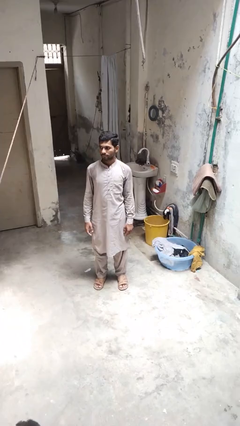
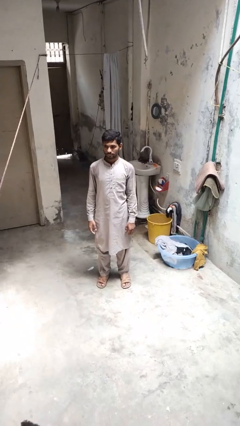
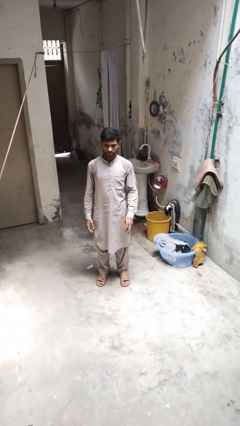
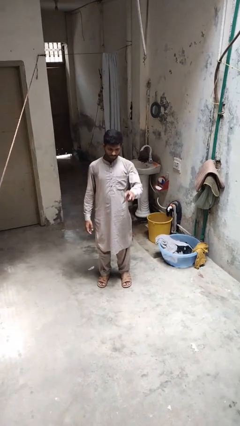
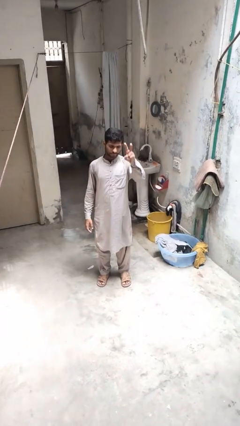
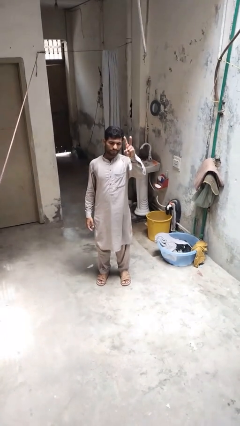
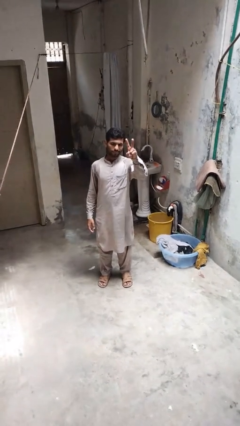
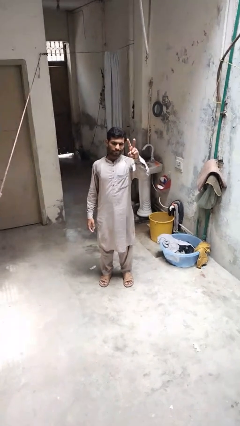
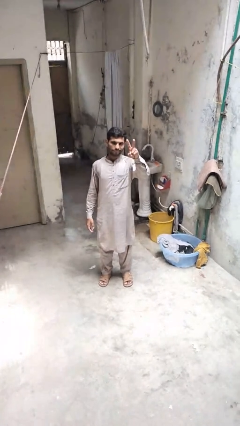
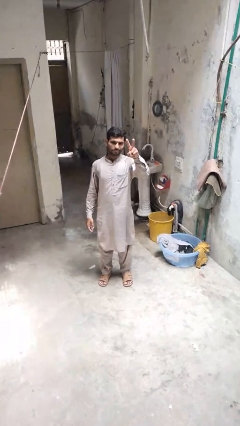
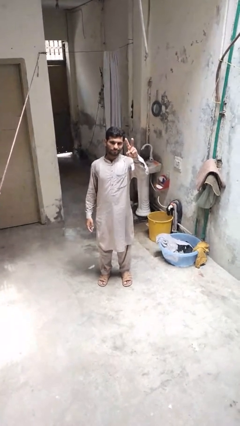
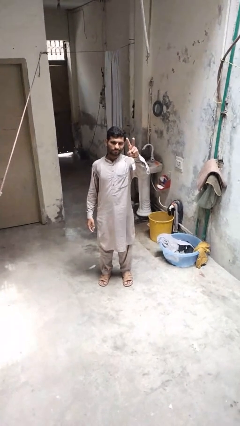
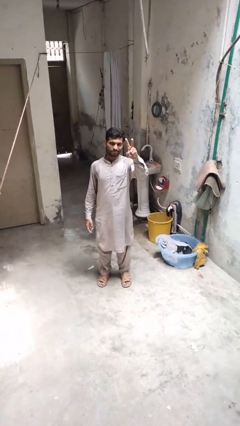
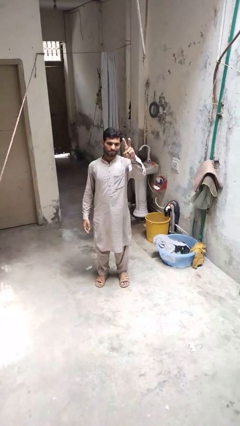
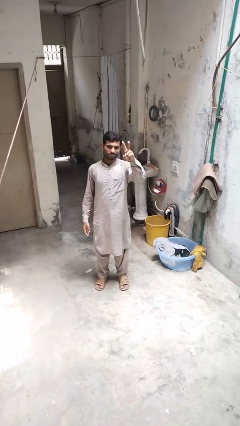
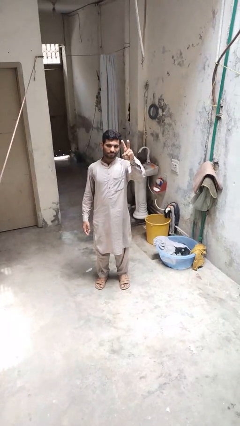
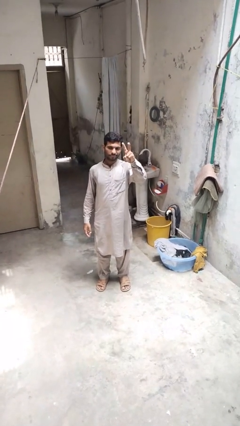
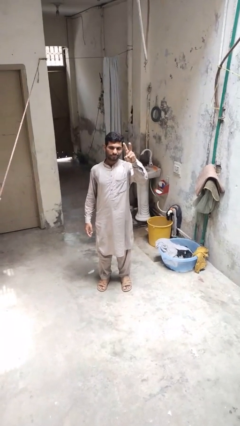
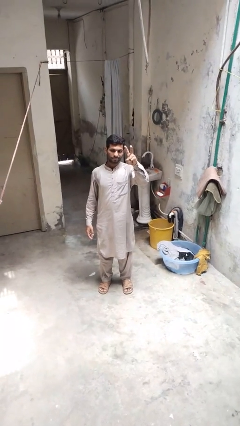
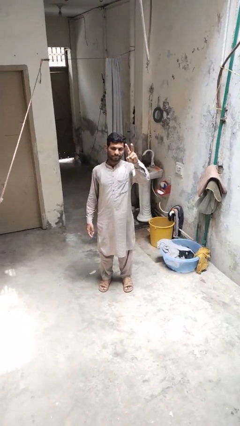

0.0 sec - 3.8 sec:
person gestures peace

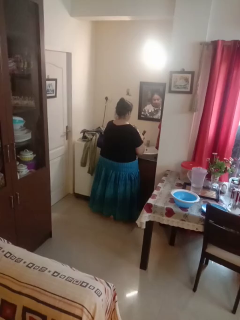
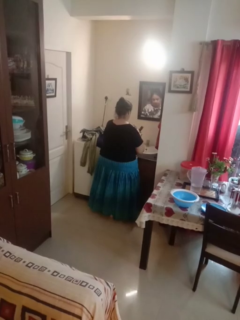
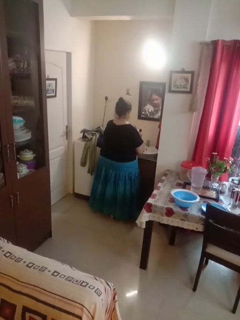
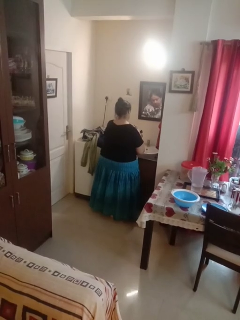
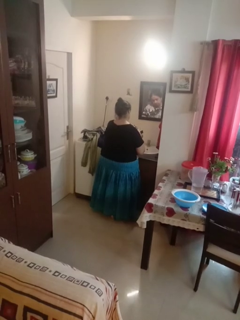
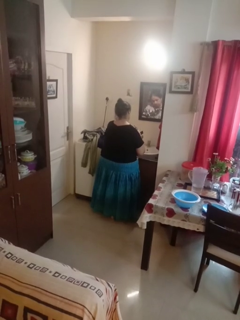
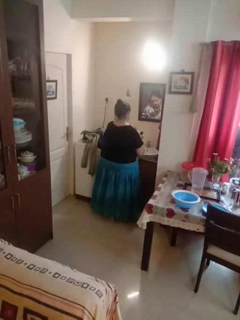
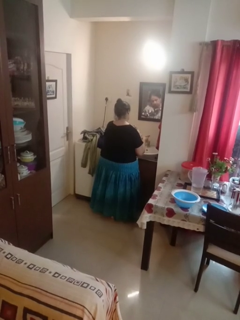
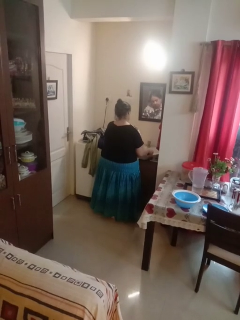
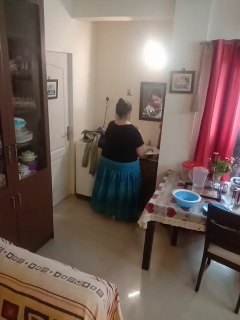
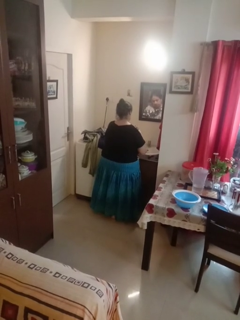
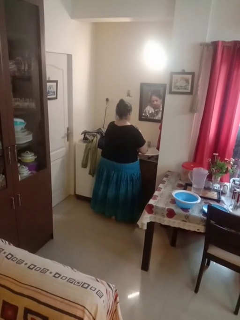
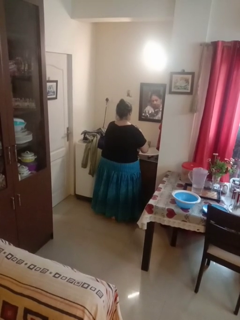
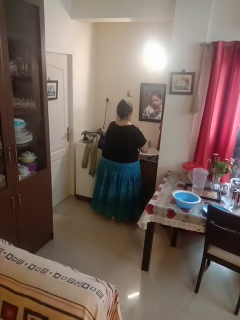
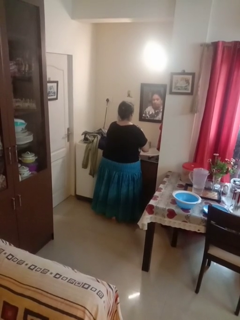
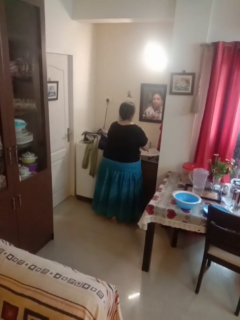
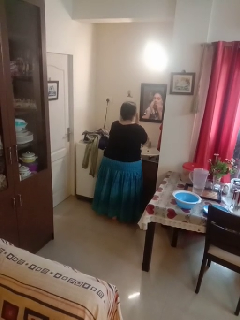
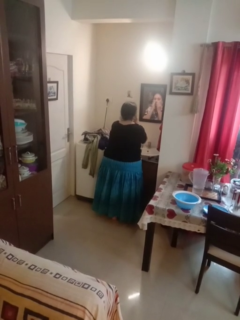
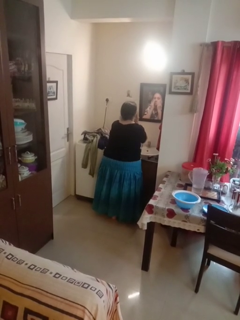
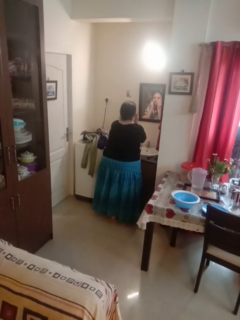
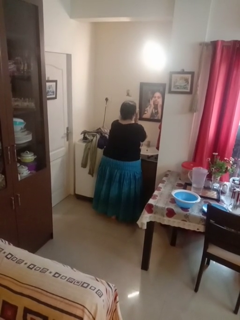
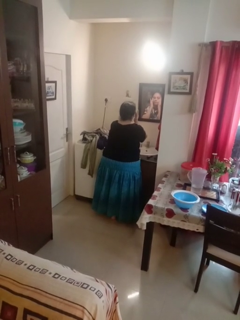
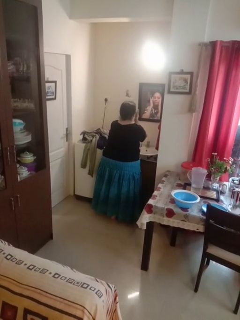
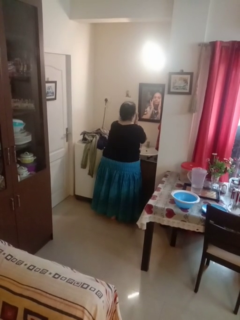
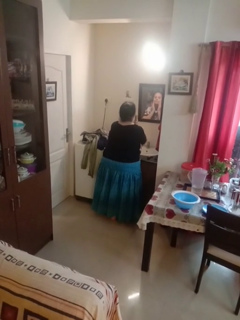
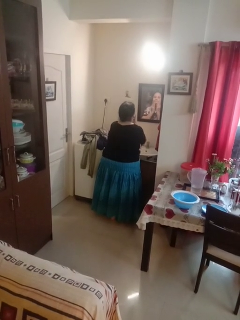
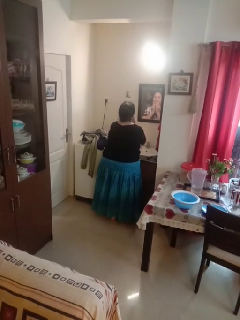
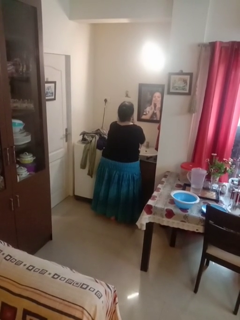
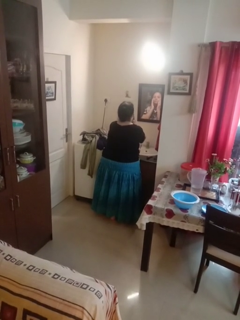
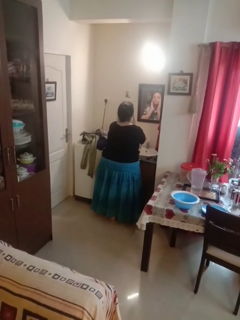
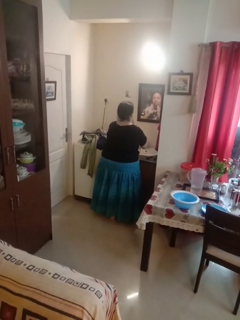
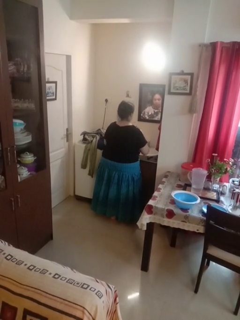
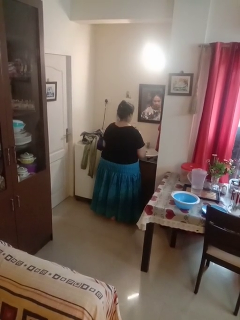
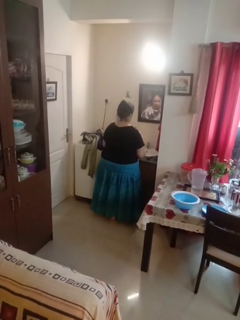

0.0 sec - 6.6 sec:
person applies foundation makeup

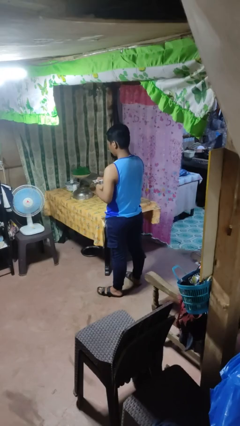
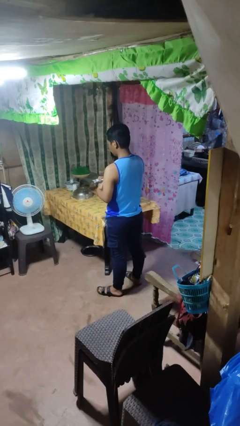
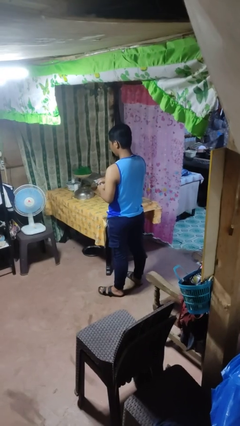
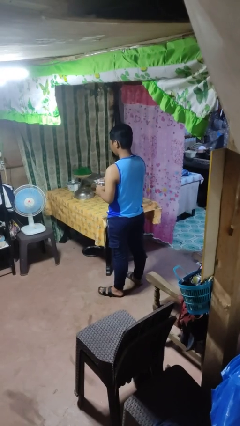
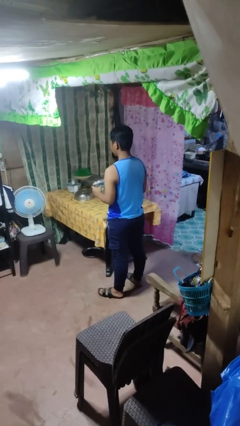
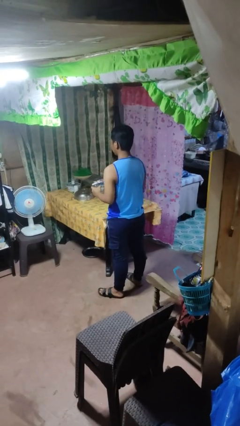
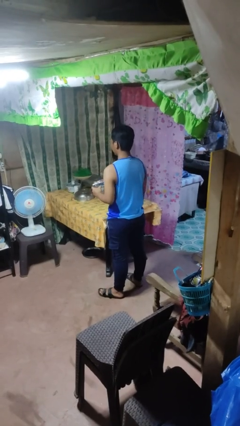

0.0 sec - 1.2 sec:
person closes jar

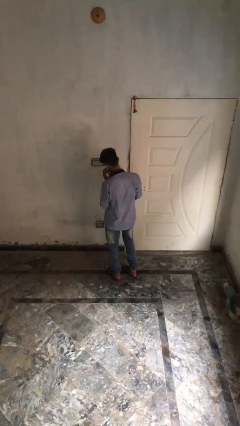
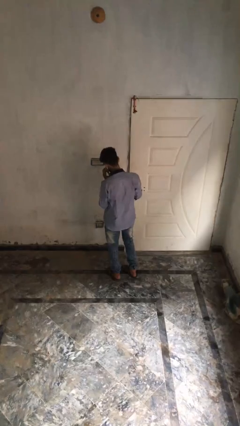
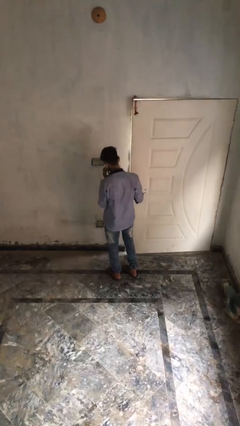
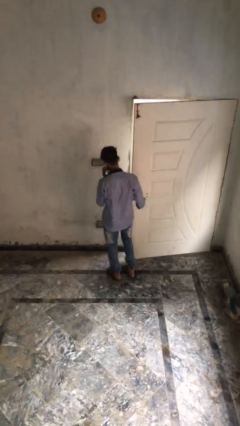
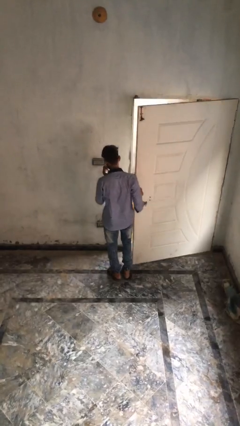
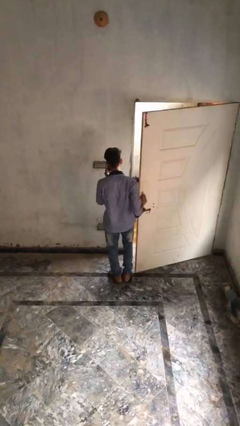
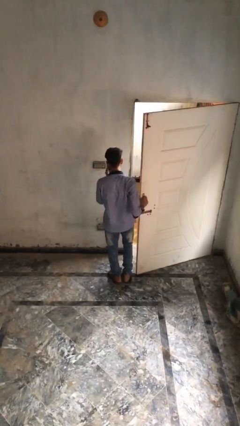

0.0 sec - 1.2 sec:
person opens facility door

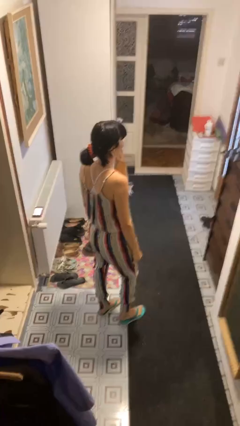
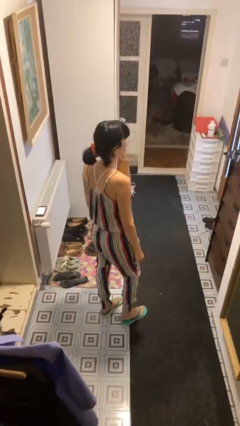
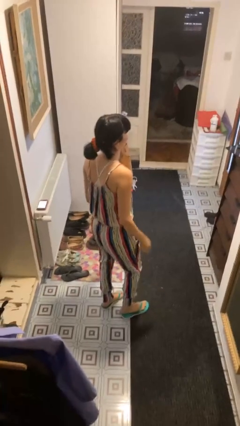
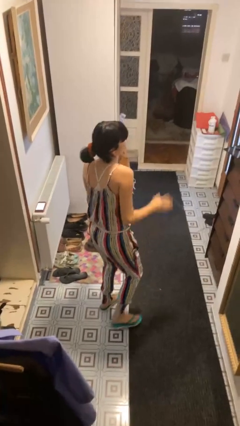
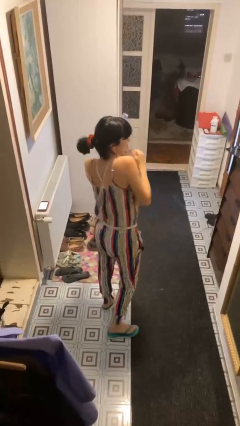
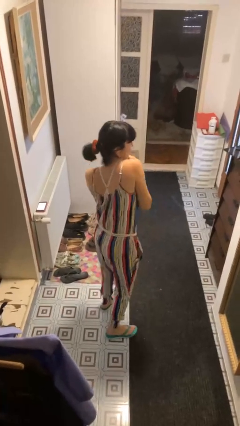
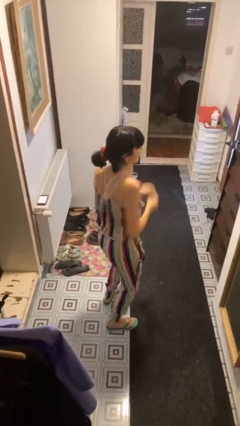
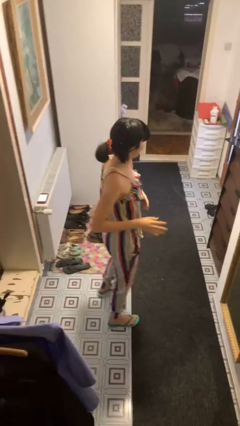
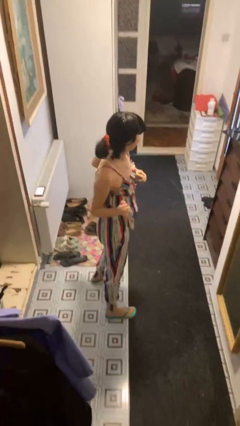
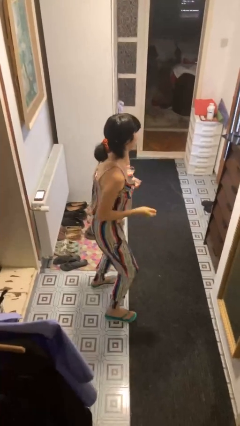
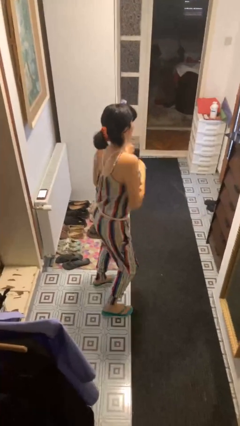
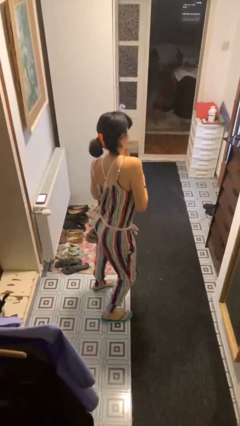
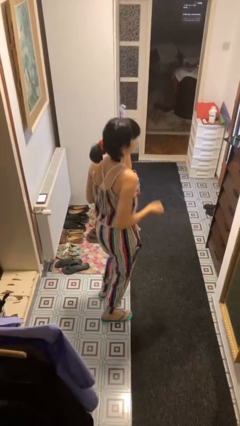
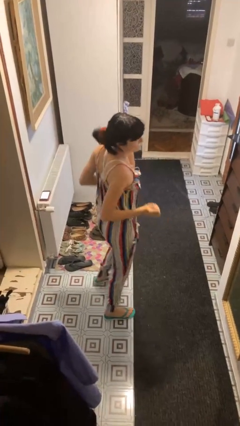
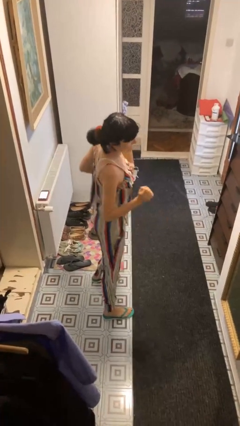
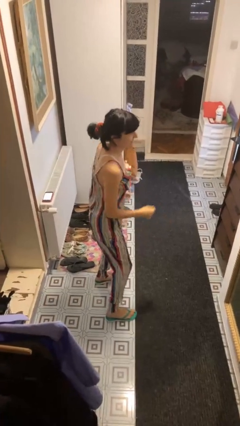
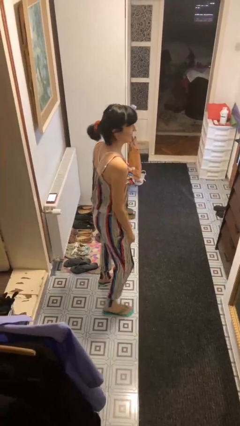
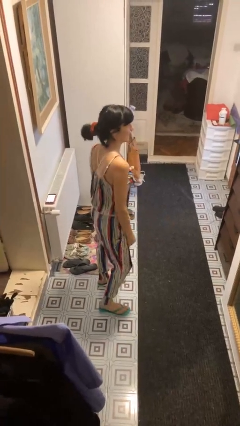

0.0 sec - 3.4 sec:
person dances in place

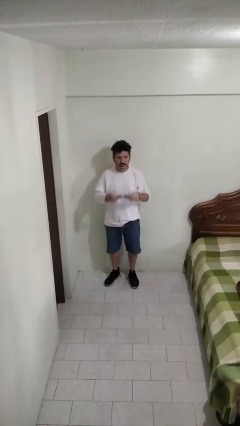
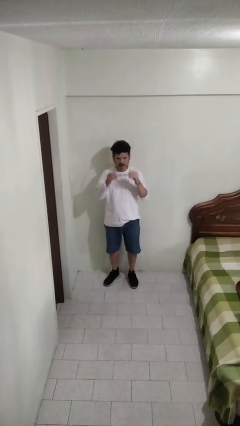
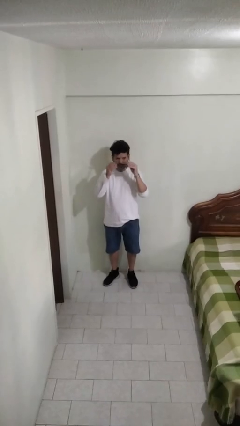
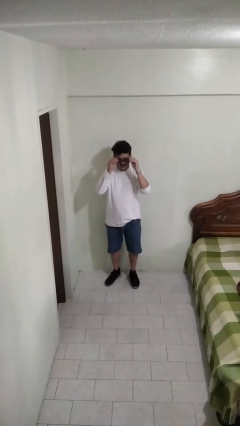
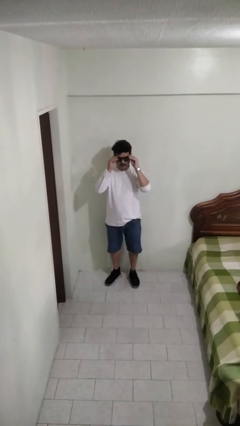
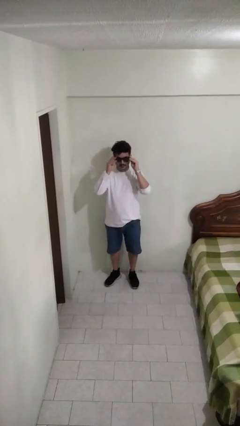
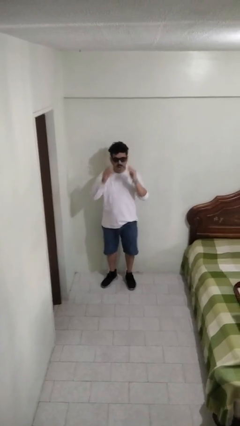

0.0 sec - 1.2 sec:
person puts on sunglasses

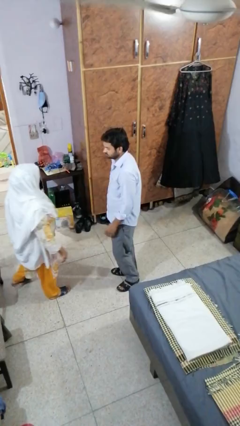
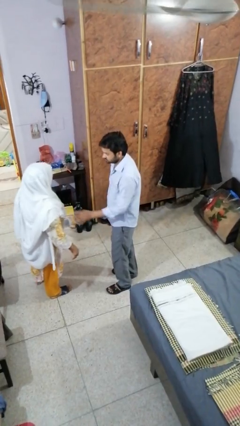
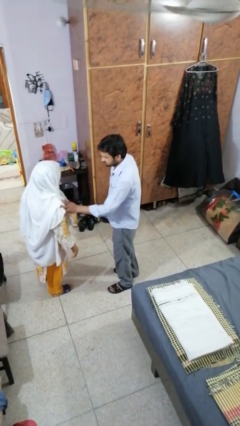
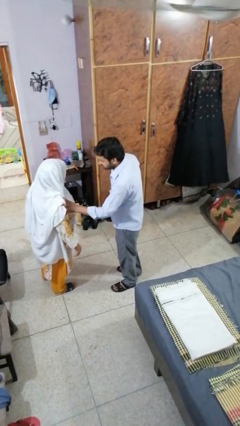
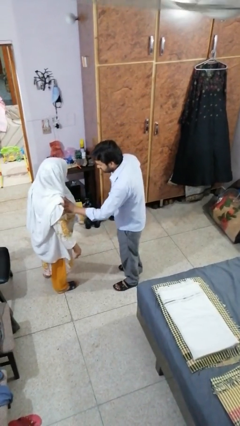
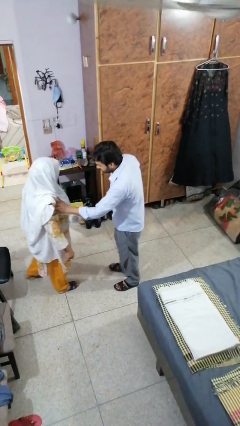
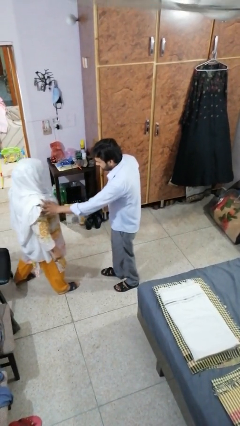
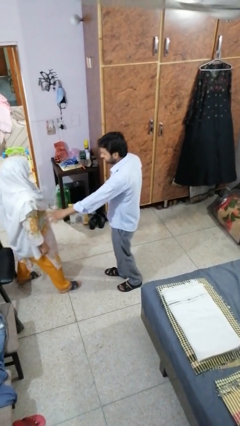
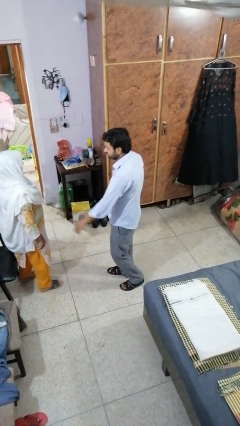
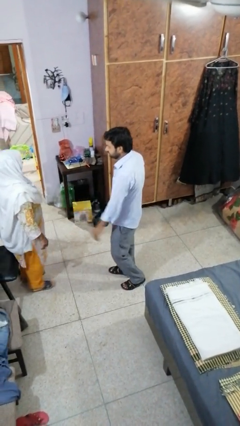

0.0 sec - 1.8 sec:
person shoves person

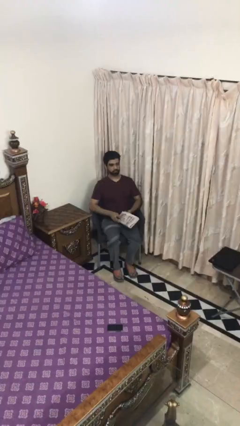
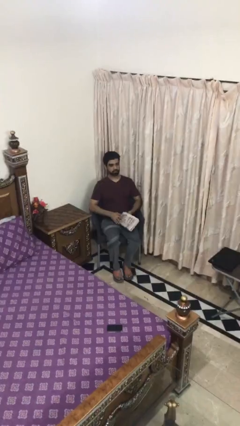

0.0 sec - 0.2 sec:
person reads document
